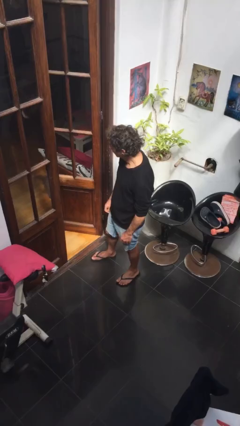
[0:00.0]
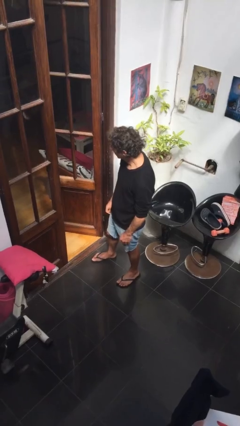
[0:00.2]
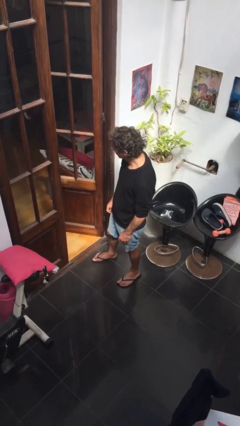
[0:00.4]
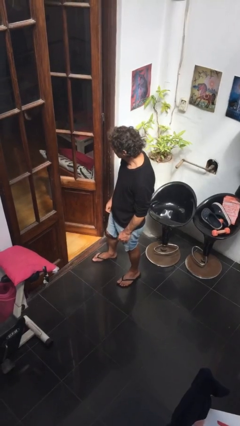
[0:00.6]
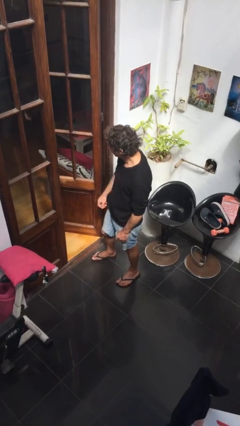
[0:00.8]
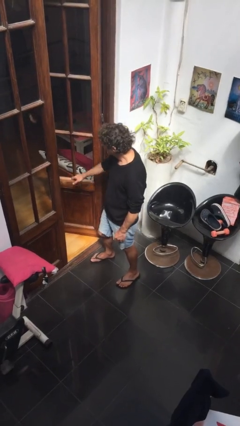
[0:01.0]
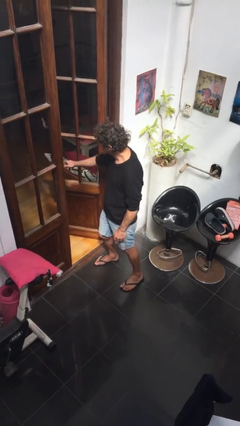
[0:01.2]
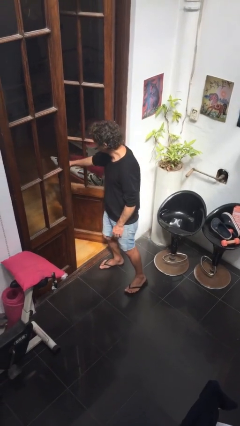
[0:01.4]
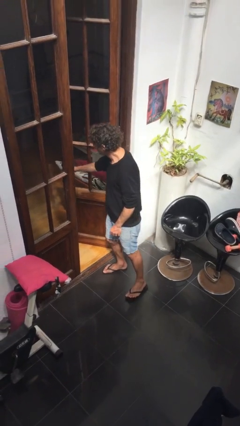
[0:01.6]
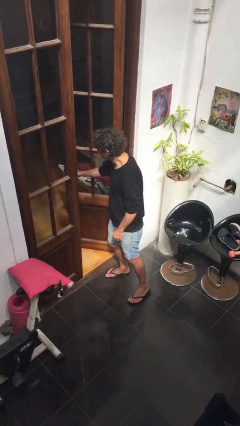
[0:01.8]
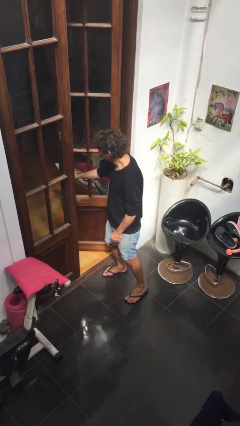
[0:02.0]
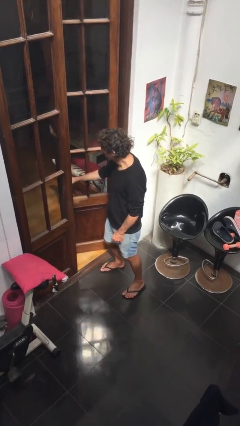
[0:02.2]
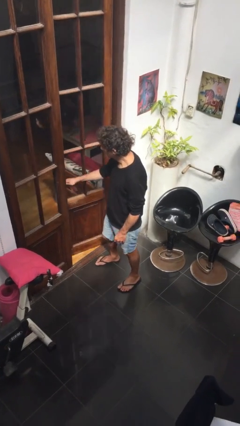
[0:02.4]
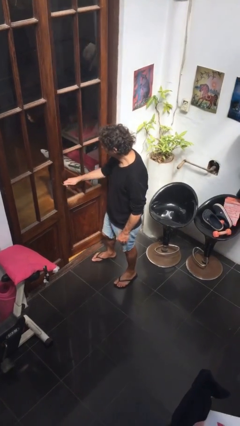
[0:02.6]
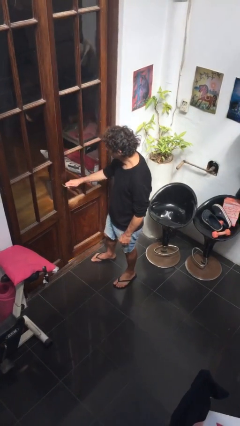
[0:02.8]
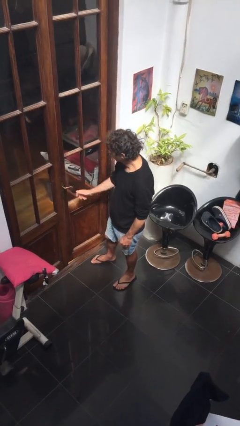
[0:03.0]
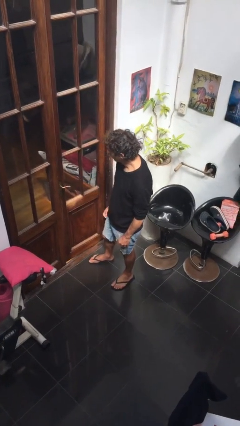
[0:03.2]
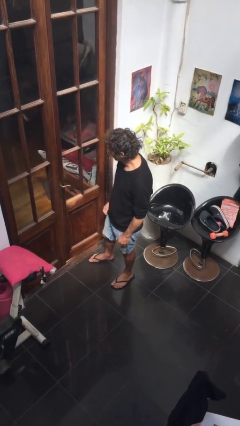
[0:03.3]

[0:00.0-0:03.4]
person closes facility door

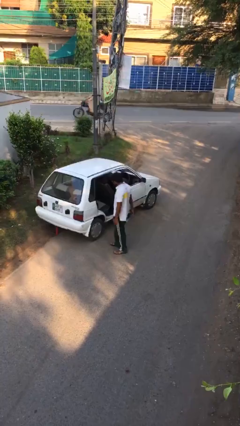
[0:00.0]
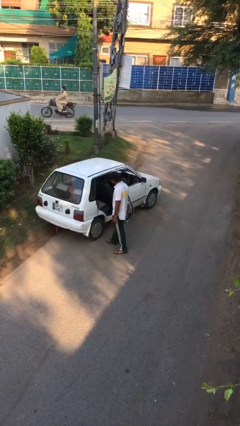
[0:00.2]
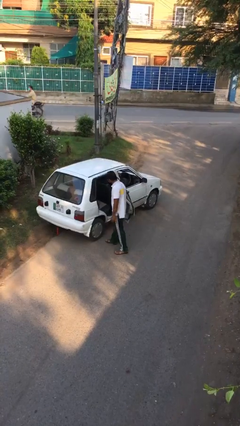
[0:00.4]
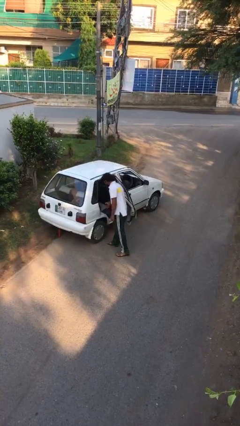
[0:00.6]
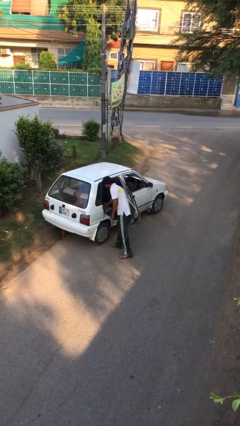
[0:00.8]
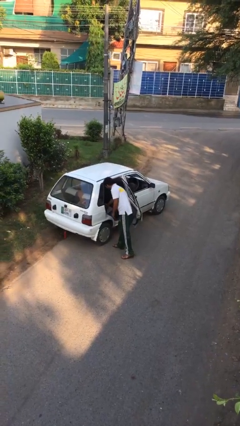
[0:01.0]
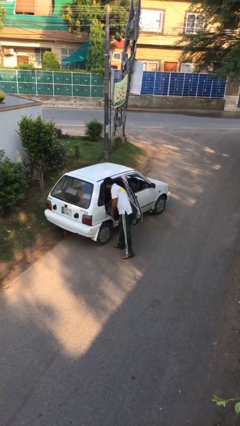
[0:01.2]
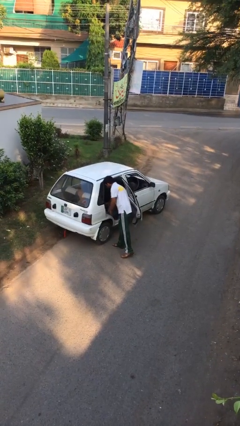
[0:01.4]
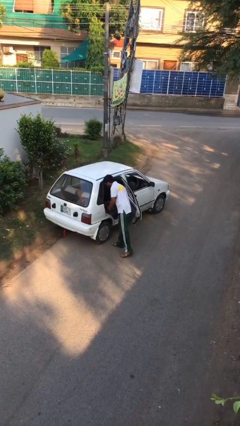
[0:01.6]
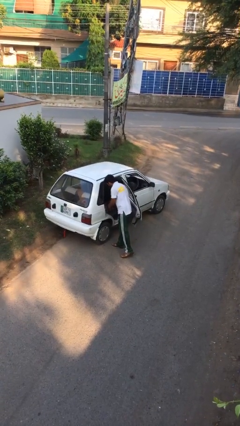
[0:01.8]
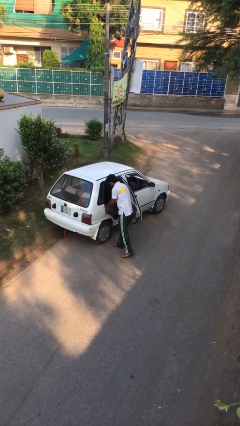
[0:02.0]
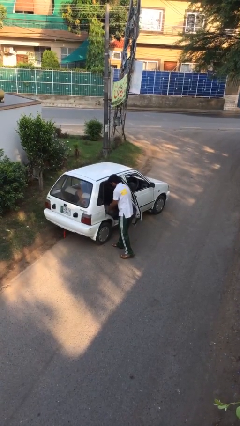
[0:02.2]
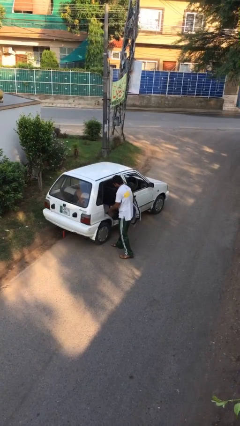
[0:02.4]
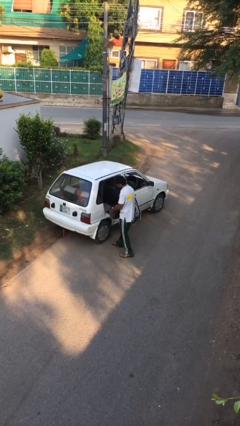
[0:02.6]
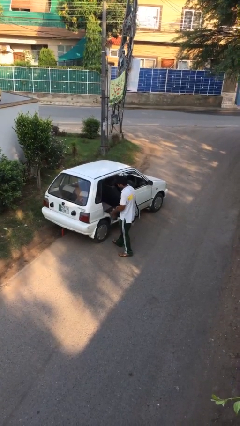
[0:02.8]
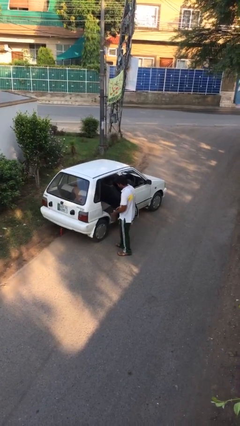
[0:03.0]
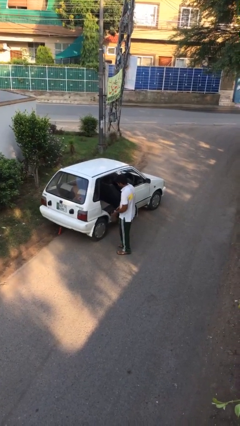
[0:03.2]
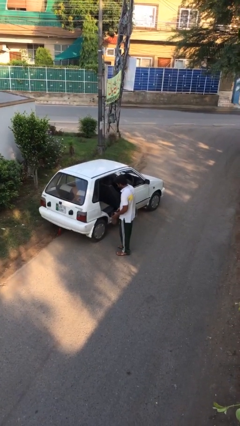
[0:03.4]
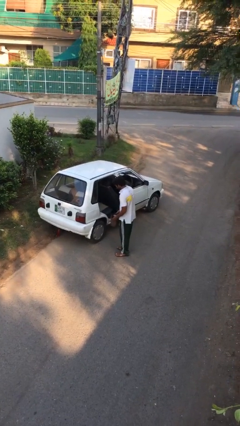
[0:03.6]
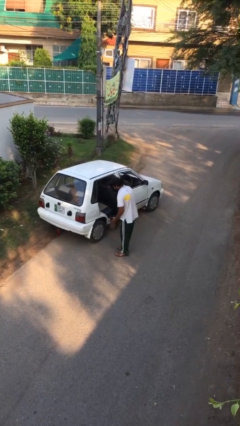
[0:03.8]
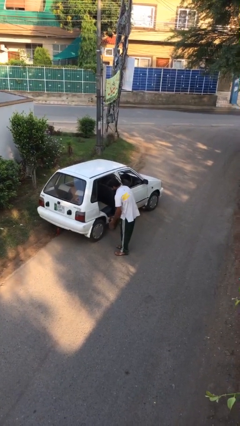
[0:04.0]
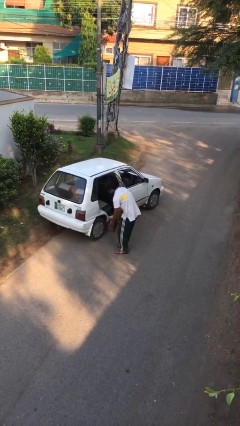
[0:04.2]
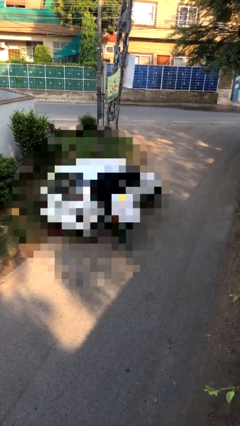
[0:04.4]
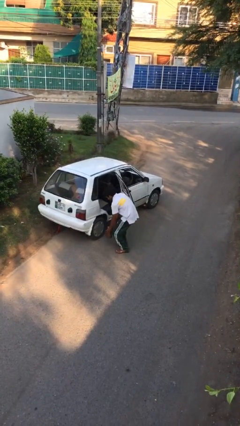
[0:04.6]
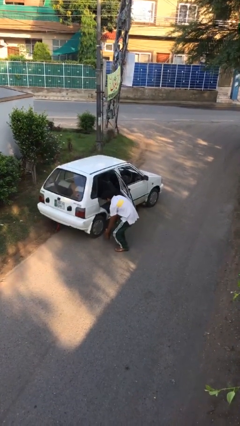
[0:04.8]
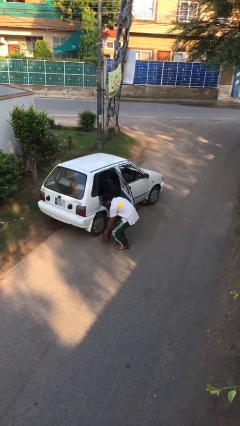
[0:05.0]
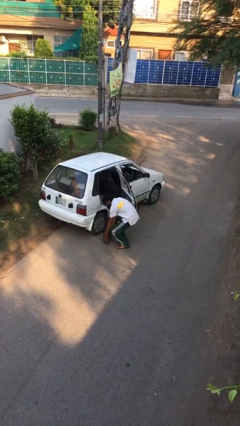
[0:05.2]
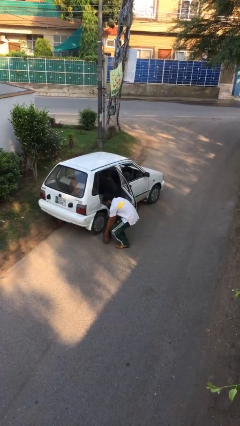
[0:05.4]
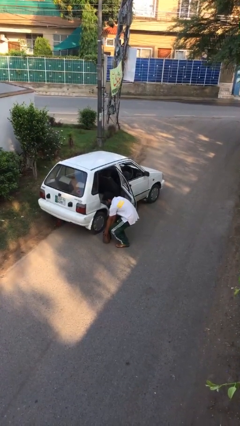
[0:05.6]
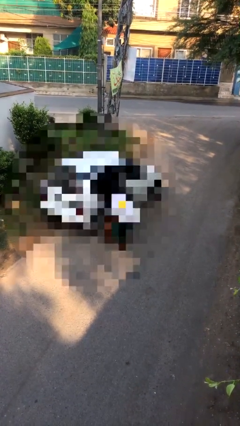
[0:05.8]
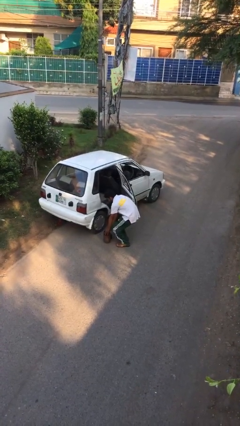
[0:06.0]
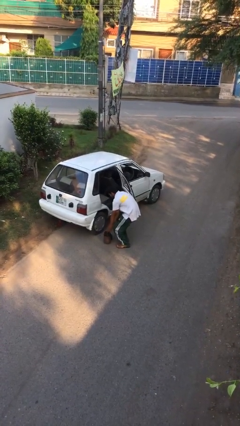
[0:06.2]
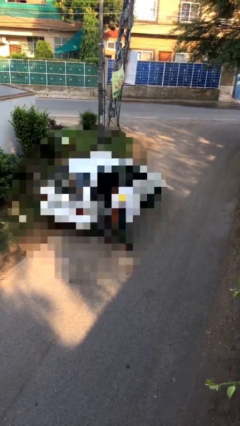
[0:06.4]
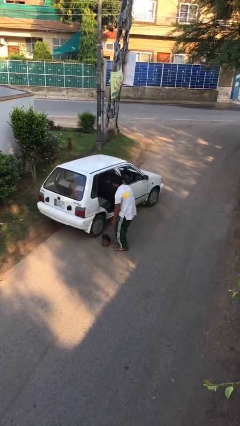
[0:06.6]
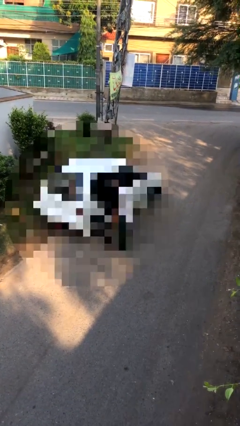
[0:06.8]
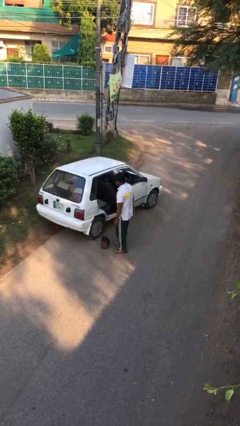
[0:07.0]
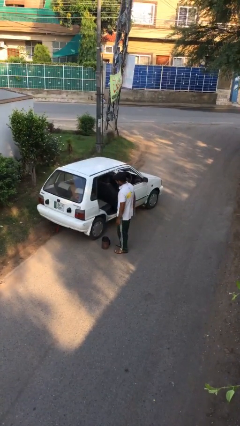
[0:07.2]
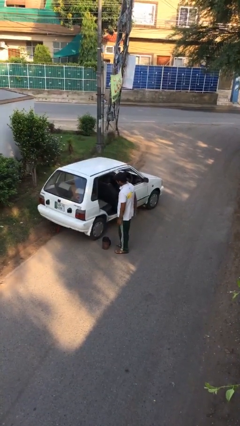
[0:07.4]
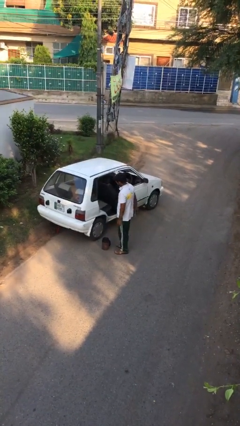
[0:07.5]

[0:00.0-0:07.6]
person unloads car

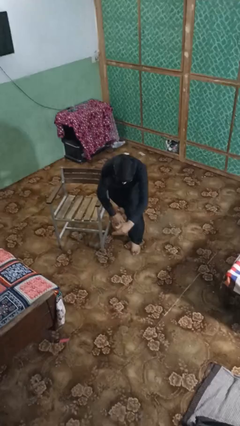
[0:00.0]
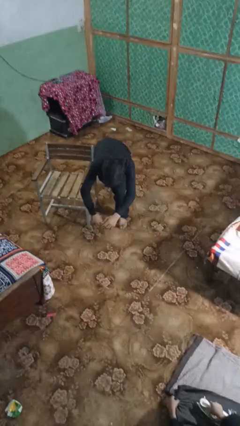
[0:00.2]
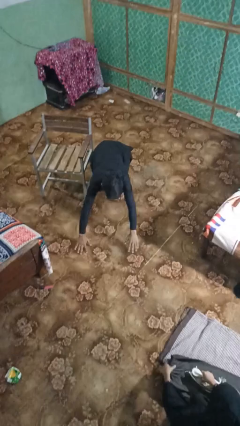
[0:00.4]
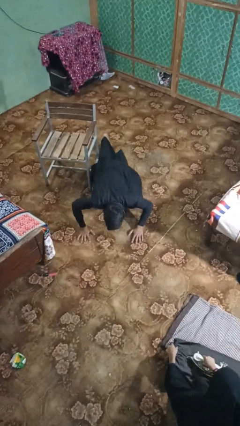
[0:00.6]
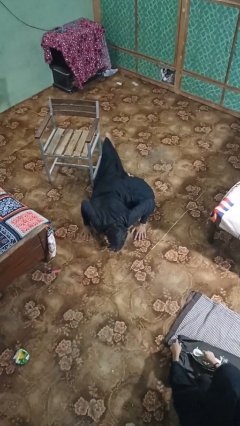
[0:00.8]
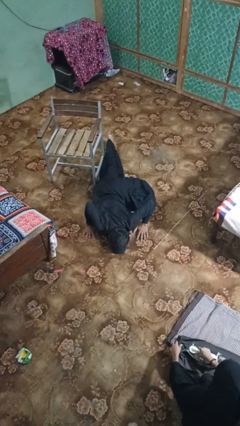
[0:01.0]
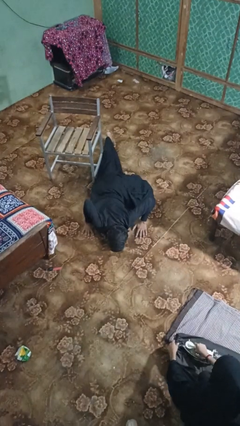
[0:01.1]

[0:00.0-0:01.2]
person lies down on floor

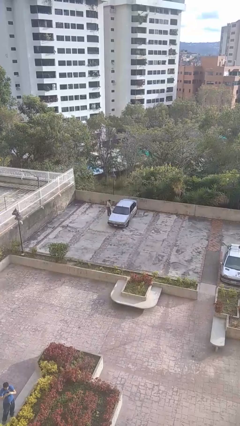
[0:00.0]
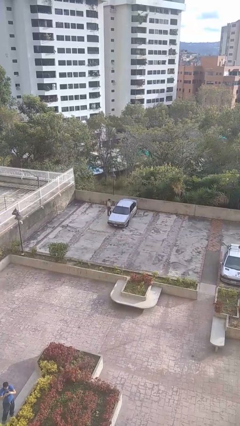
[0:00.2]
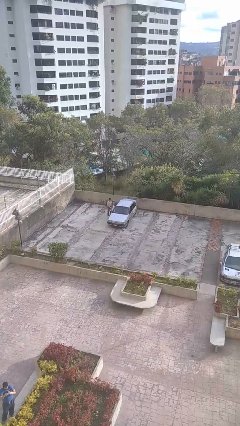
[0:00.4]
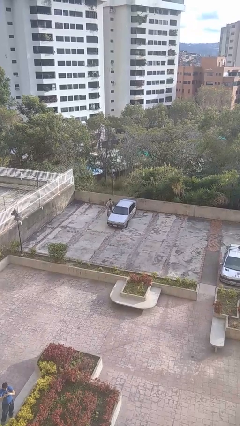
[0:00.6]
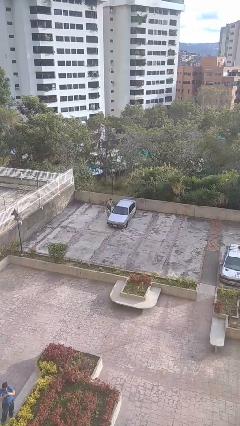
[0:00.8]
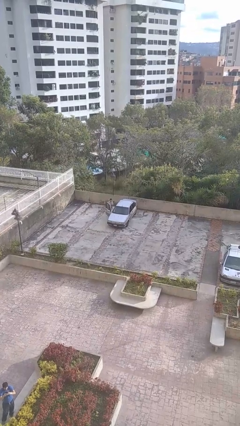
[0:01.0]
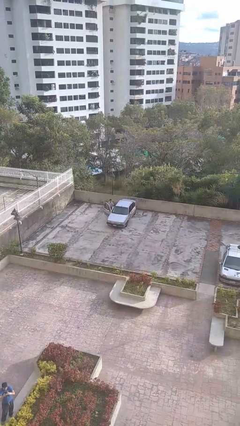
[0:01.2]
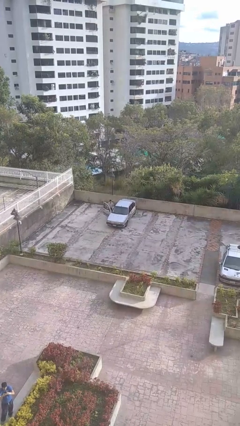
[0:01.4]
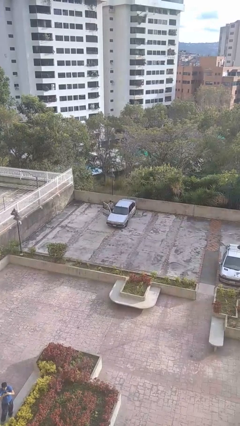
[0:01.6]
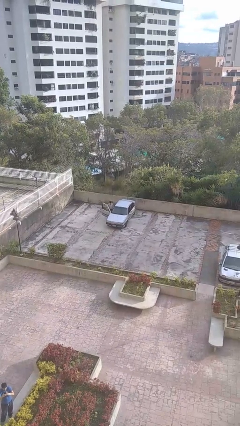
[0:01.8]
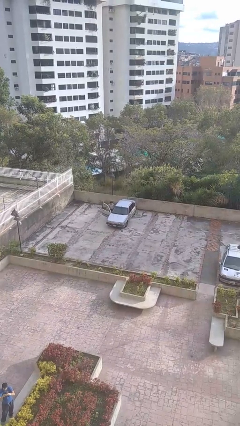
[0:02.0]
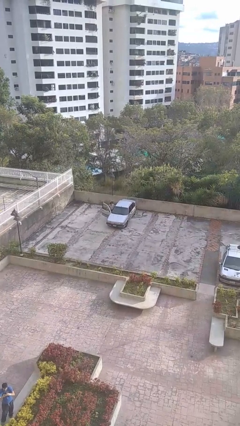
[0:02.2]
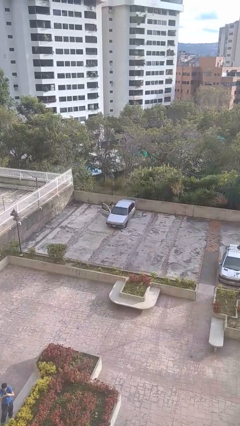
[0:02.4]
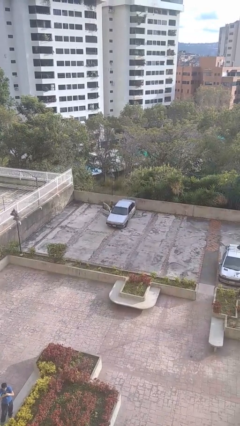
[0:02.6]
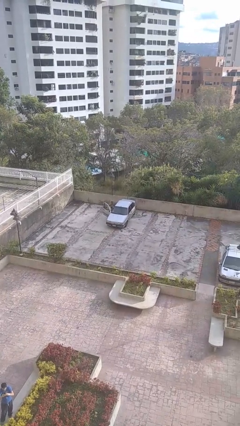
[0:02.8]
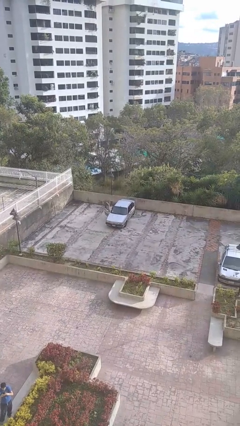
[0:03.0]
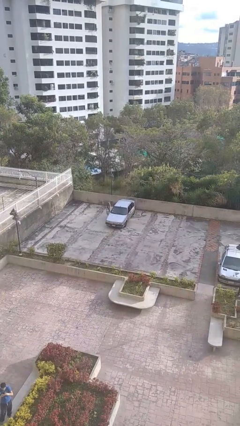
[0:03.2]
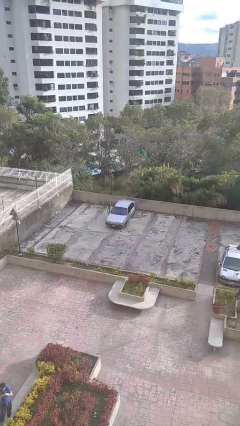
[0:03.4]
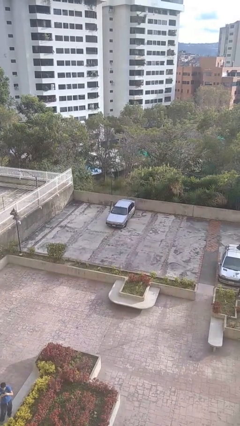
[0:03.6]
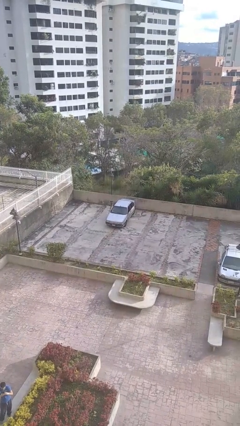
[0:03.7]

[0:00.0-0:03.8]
car picks up person

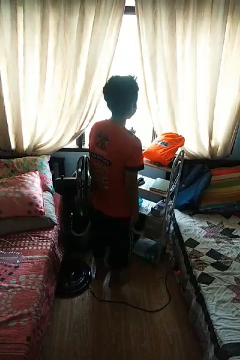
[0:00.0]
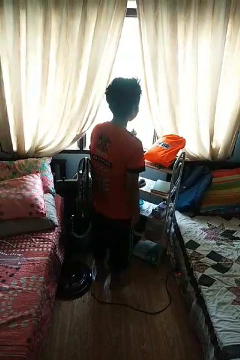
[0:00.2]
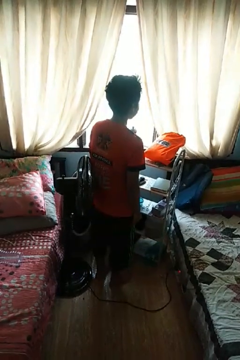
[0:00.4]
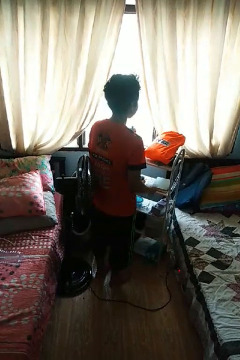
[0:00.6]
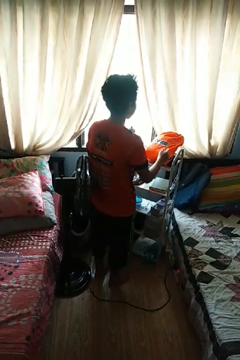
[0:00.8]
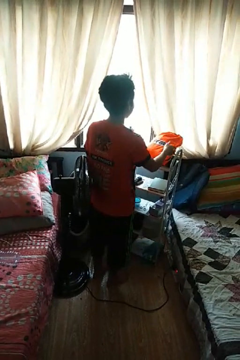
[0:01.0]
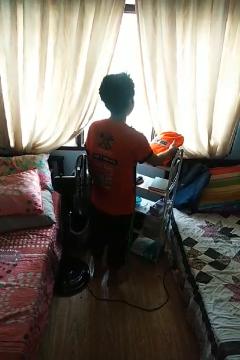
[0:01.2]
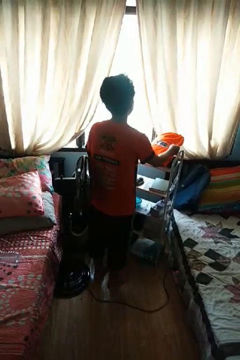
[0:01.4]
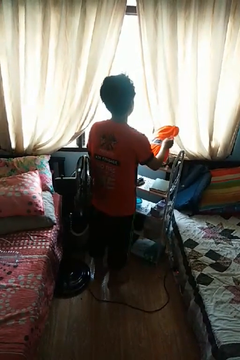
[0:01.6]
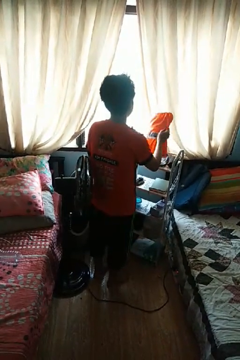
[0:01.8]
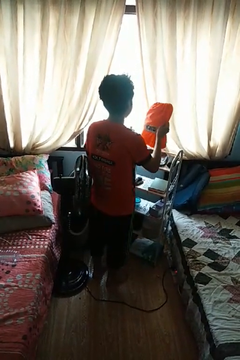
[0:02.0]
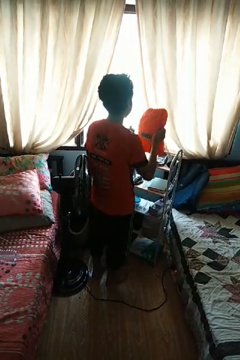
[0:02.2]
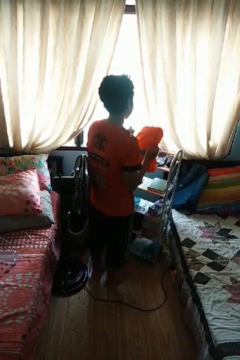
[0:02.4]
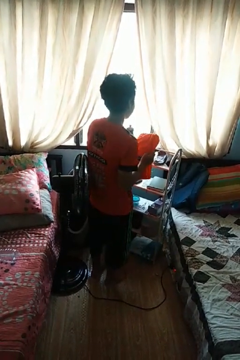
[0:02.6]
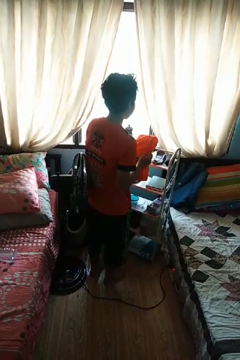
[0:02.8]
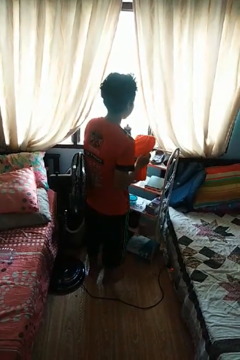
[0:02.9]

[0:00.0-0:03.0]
person picks up object from countertop
